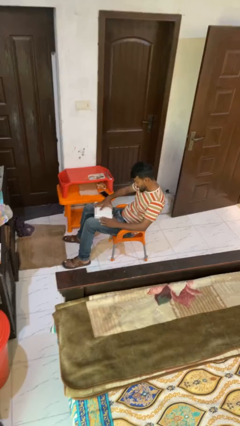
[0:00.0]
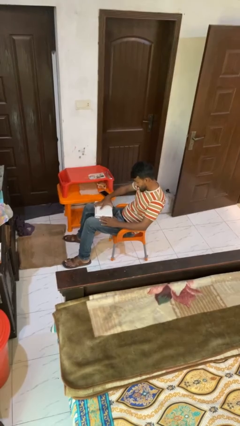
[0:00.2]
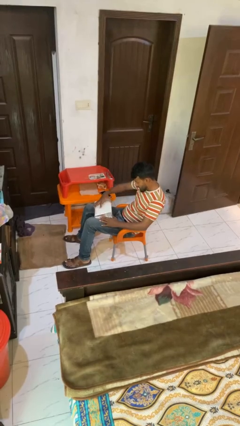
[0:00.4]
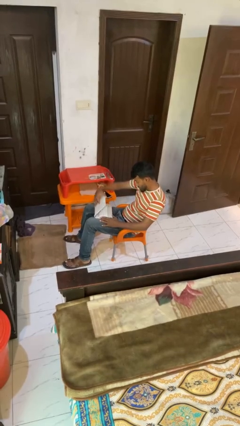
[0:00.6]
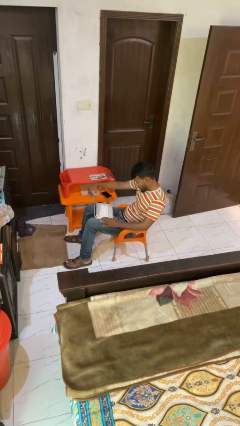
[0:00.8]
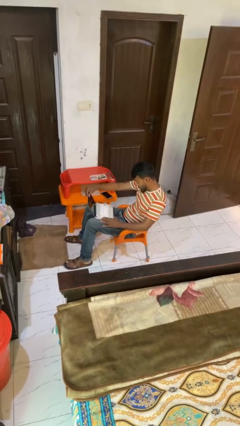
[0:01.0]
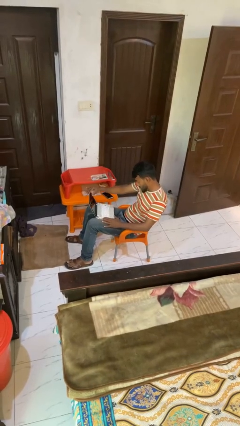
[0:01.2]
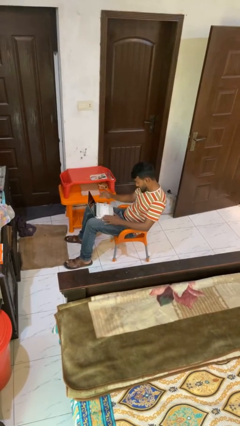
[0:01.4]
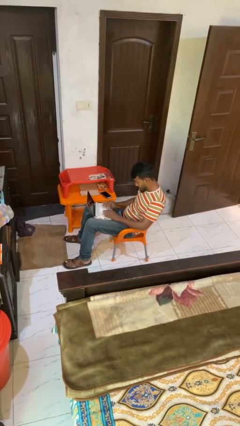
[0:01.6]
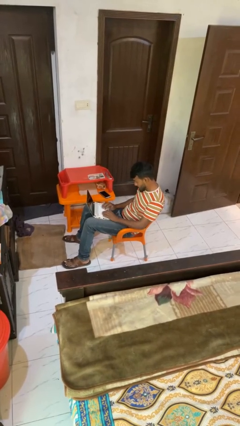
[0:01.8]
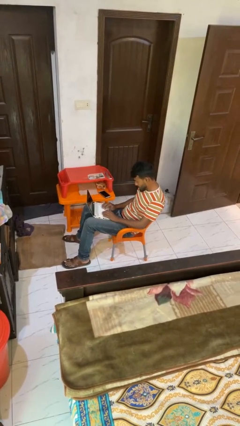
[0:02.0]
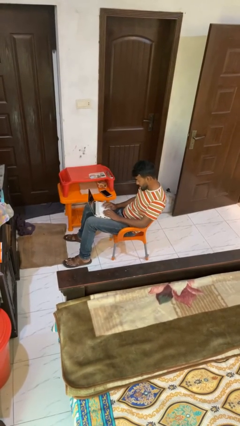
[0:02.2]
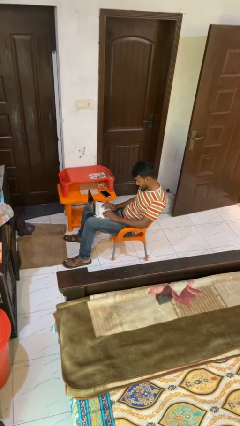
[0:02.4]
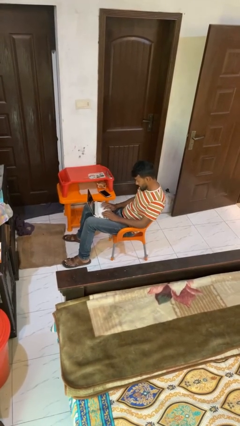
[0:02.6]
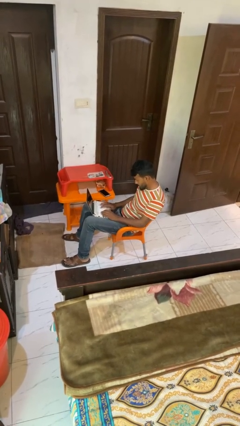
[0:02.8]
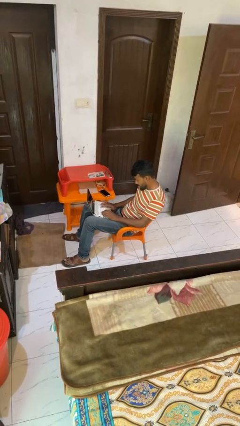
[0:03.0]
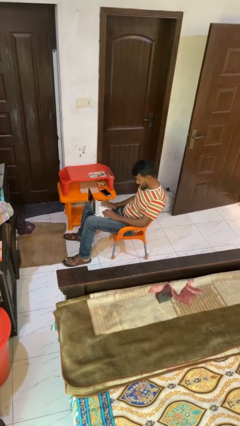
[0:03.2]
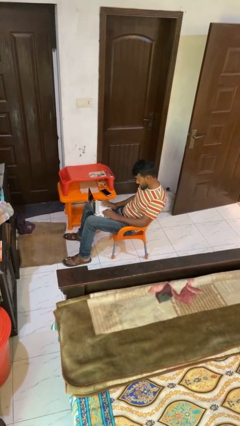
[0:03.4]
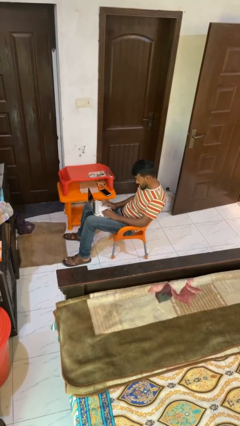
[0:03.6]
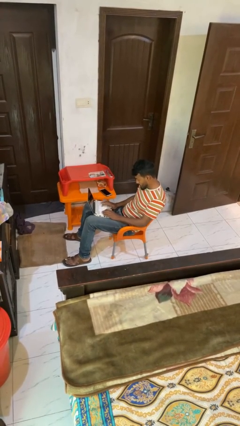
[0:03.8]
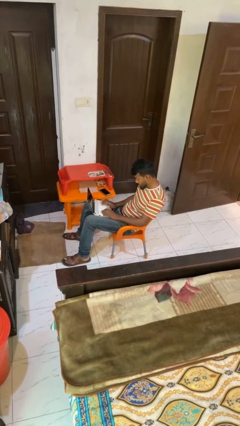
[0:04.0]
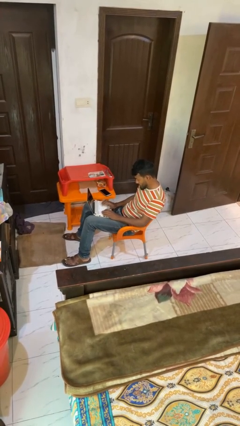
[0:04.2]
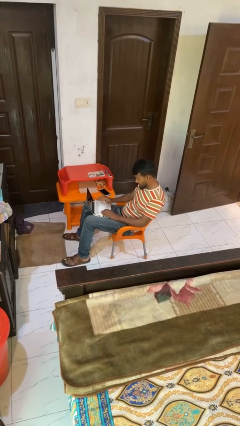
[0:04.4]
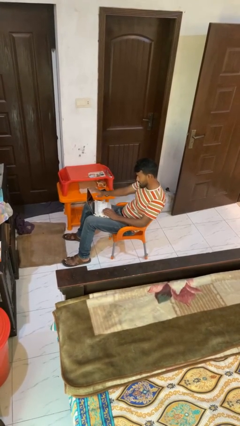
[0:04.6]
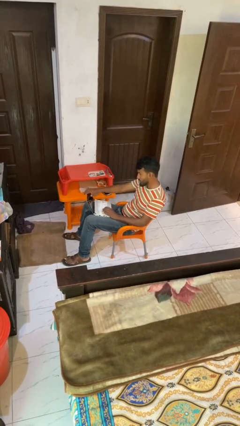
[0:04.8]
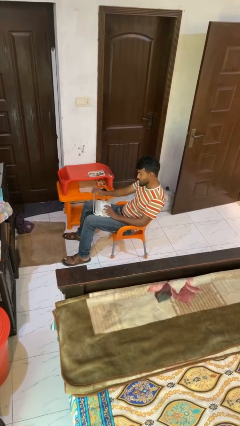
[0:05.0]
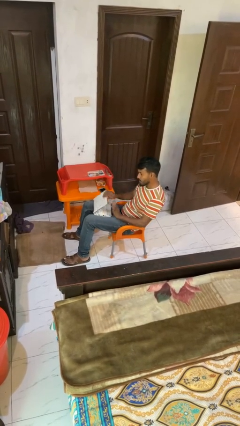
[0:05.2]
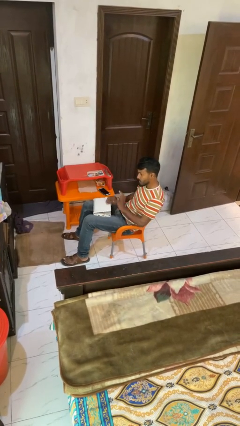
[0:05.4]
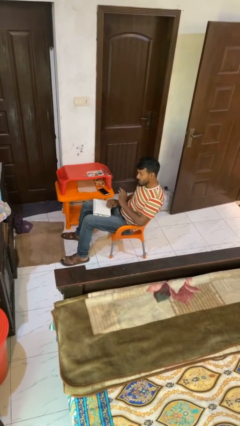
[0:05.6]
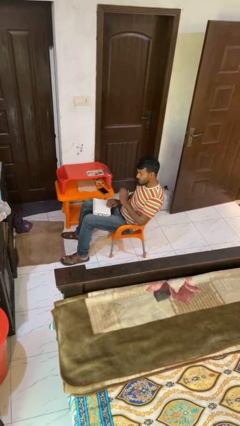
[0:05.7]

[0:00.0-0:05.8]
person interacts with laptop

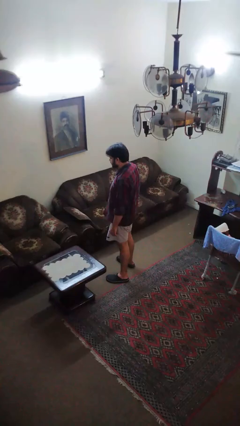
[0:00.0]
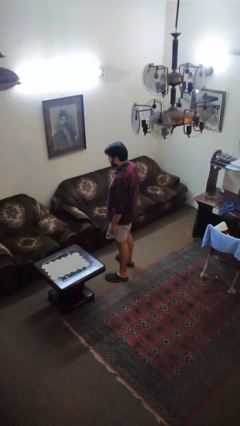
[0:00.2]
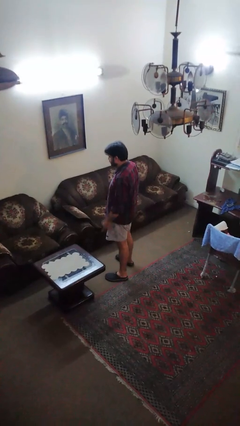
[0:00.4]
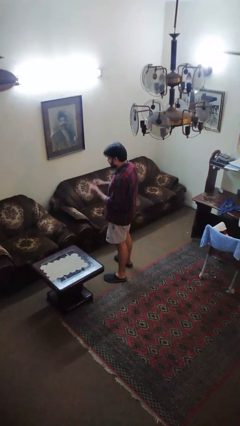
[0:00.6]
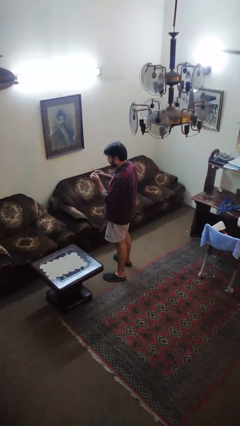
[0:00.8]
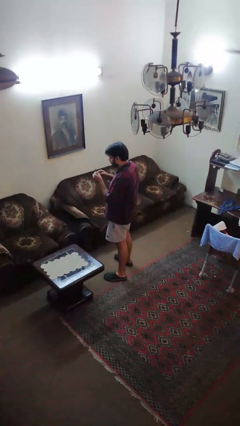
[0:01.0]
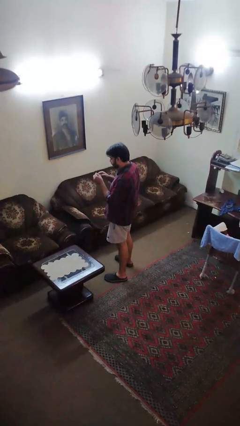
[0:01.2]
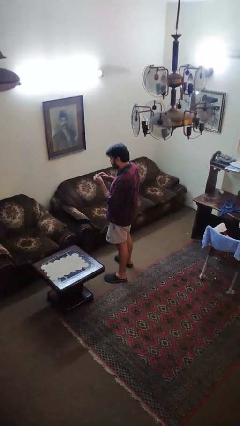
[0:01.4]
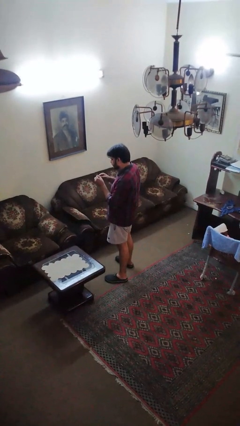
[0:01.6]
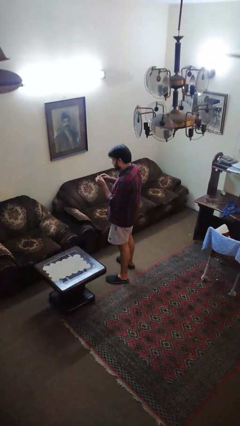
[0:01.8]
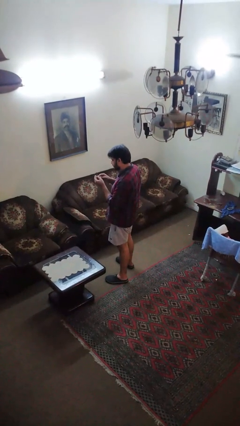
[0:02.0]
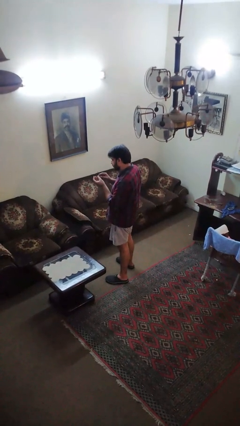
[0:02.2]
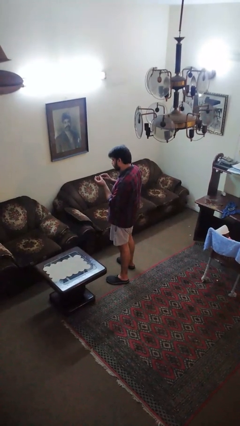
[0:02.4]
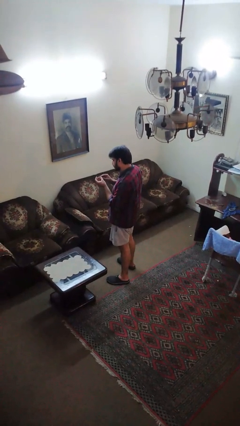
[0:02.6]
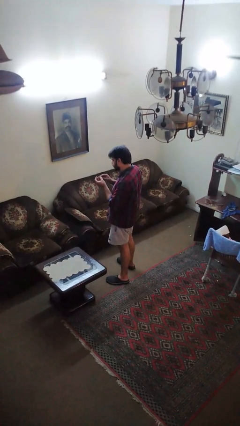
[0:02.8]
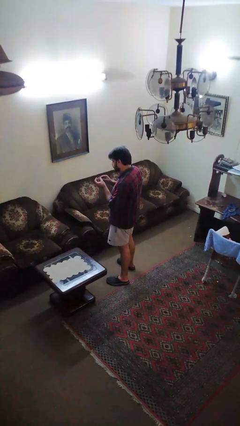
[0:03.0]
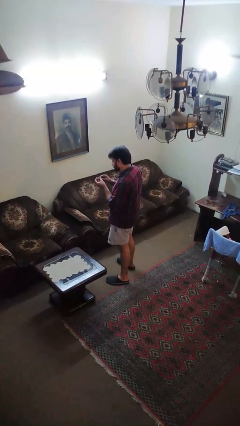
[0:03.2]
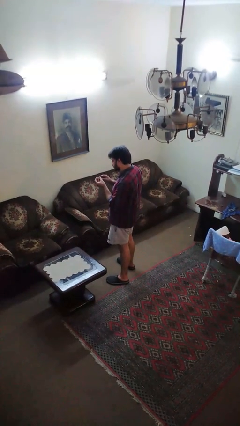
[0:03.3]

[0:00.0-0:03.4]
person files fingernails

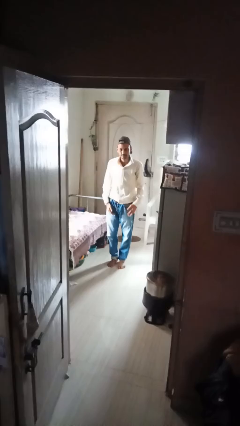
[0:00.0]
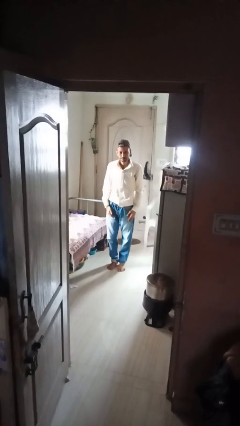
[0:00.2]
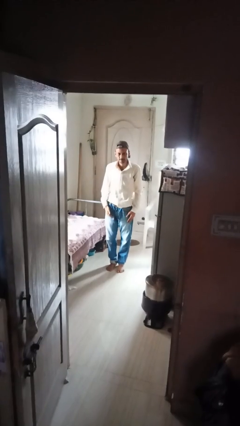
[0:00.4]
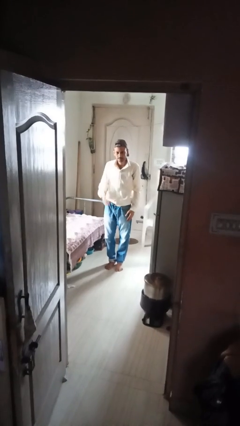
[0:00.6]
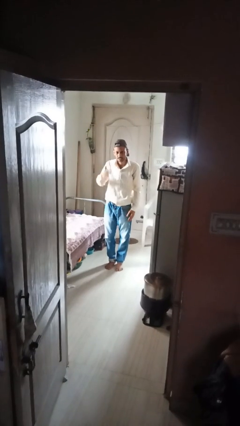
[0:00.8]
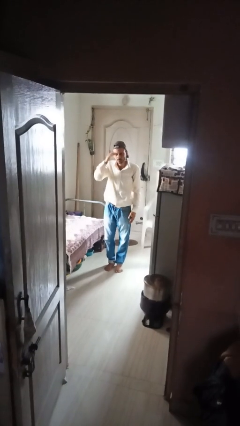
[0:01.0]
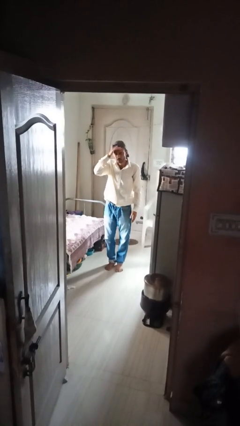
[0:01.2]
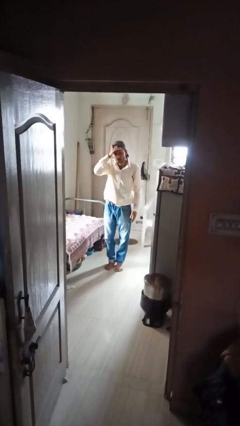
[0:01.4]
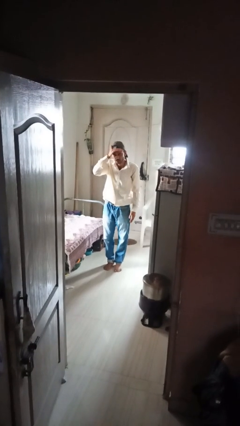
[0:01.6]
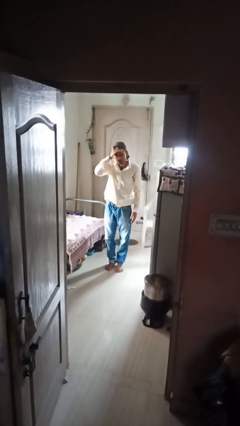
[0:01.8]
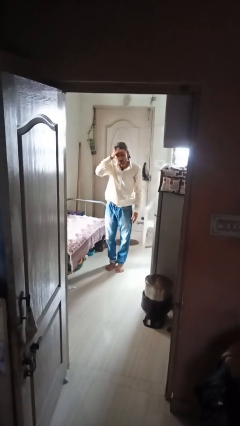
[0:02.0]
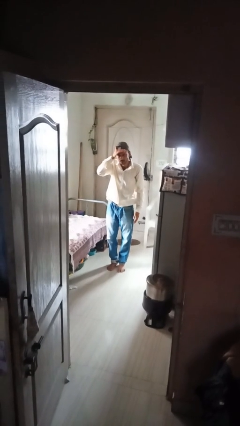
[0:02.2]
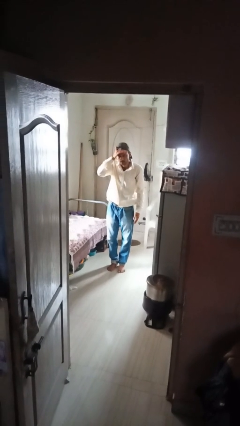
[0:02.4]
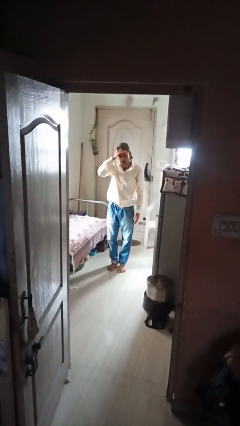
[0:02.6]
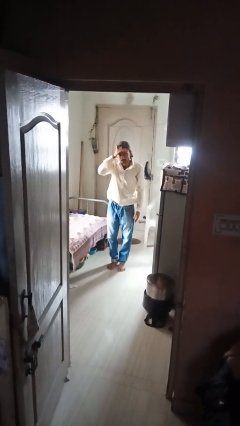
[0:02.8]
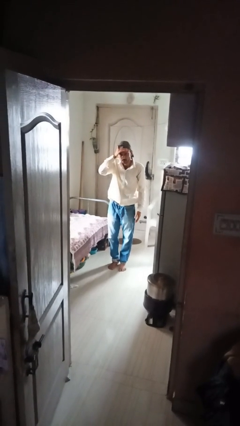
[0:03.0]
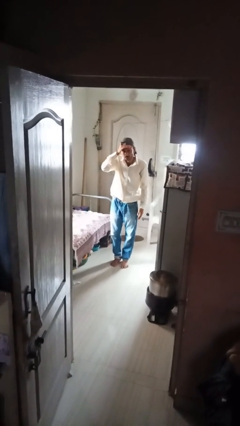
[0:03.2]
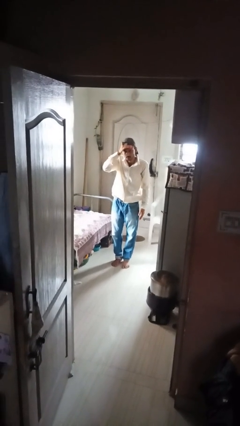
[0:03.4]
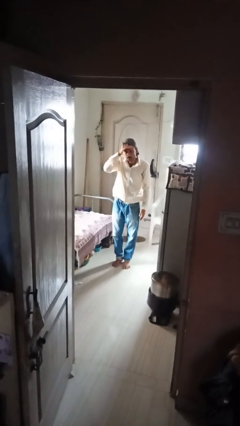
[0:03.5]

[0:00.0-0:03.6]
person shades eyes

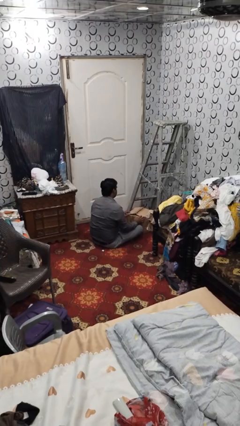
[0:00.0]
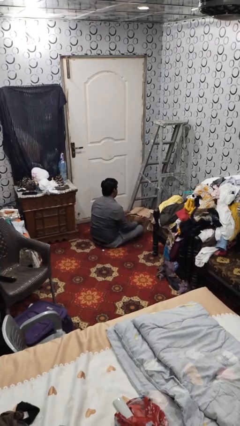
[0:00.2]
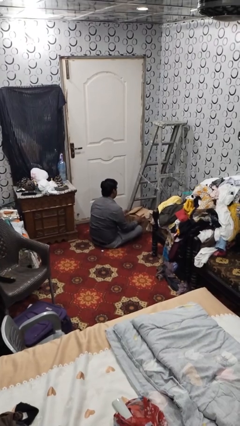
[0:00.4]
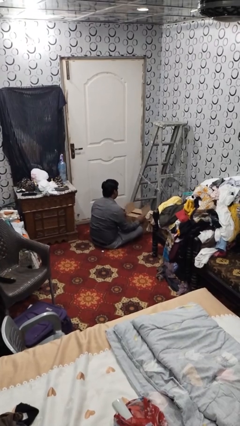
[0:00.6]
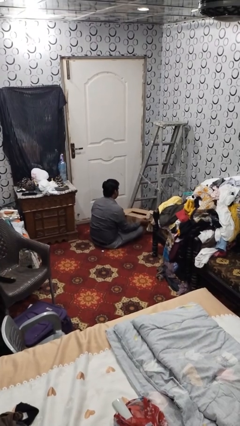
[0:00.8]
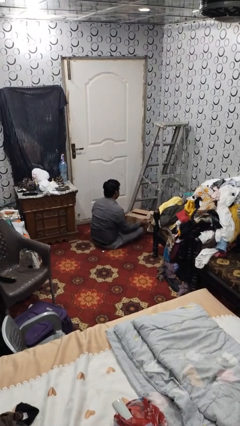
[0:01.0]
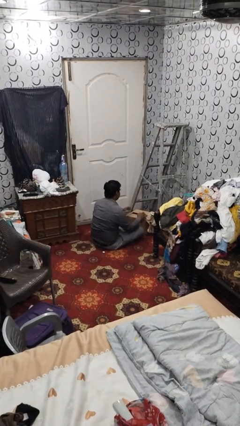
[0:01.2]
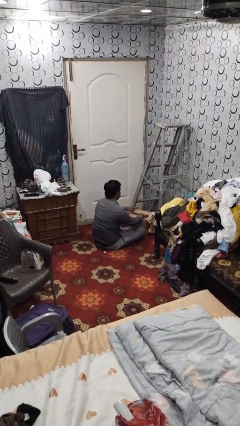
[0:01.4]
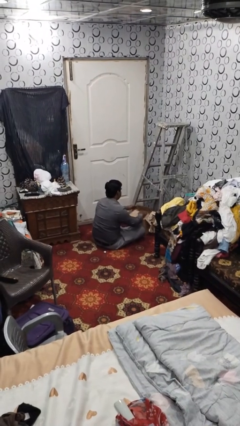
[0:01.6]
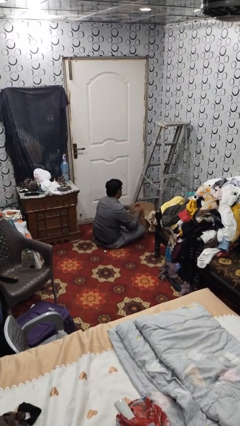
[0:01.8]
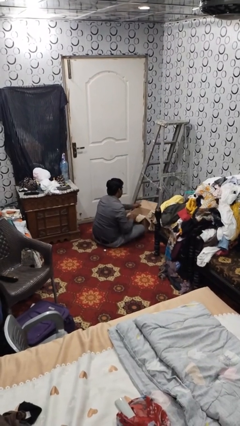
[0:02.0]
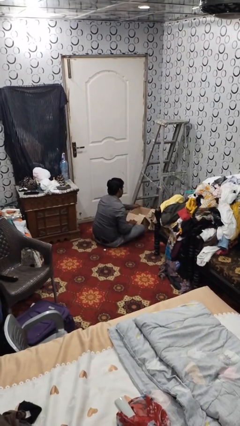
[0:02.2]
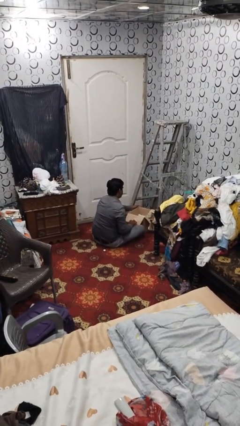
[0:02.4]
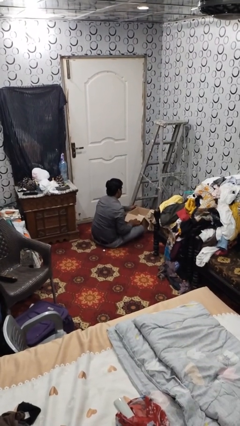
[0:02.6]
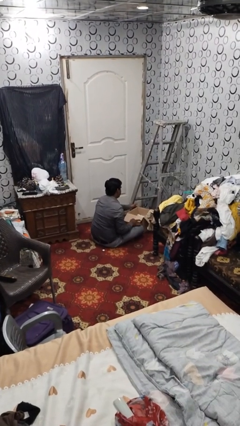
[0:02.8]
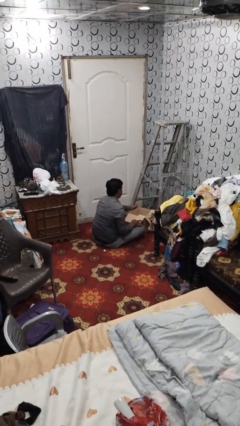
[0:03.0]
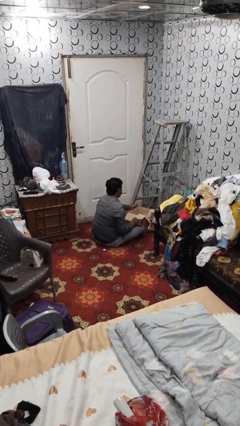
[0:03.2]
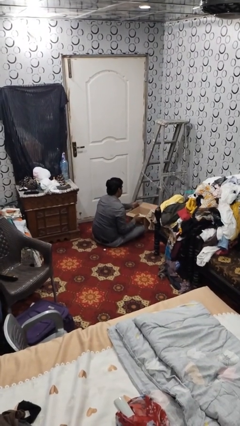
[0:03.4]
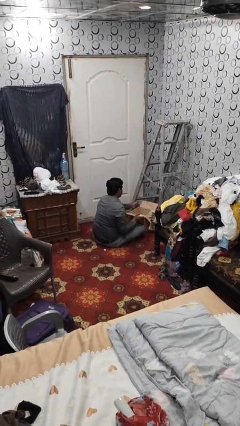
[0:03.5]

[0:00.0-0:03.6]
person opens box

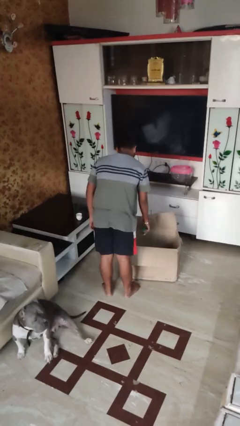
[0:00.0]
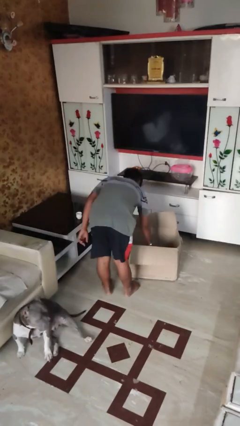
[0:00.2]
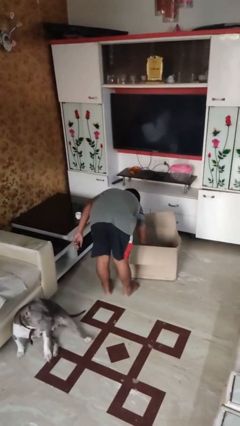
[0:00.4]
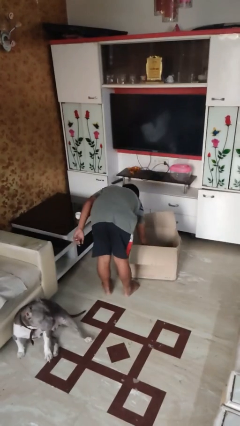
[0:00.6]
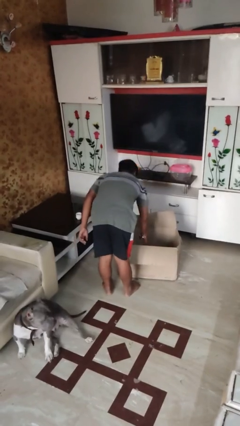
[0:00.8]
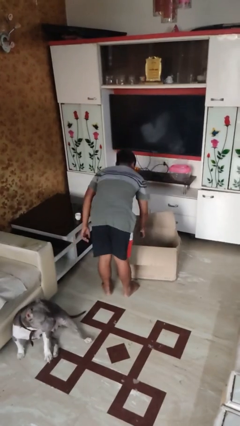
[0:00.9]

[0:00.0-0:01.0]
person puts object into box

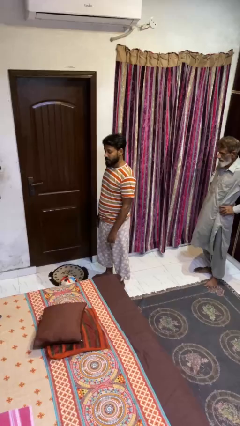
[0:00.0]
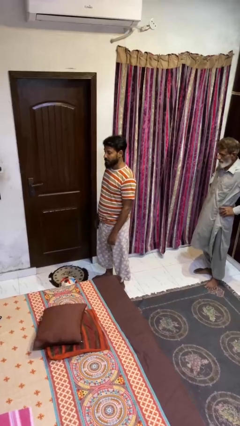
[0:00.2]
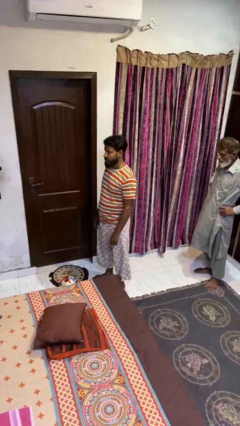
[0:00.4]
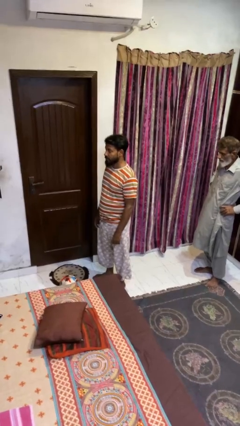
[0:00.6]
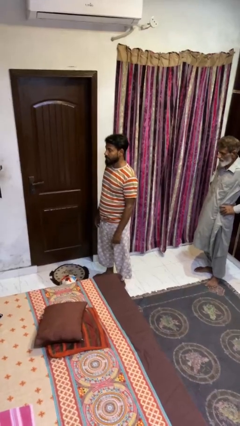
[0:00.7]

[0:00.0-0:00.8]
person looks over shoulder
